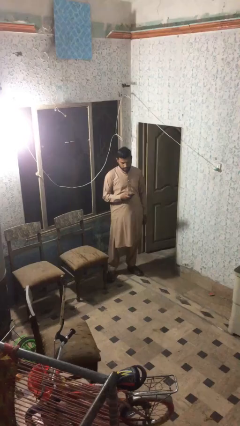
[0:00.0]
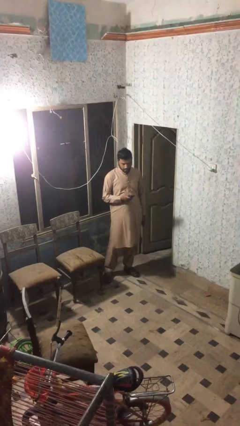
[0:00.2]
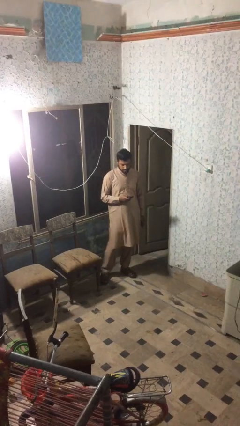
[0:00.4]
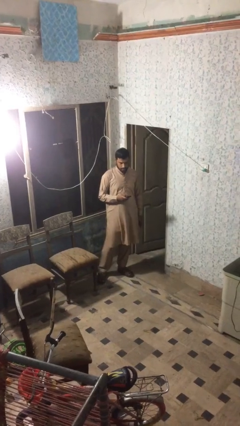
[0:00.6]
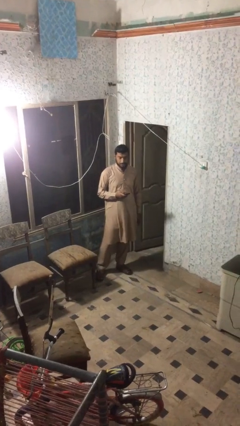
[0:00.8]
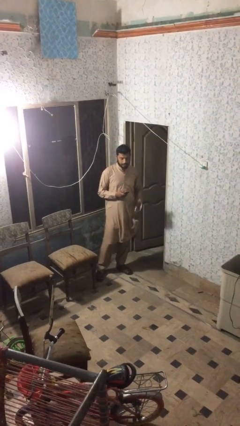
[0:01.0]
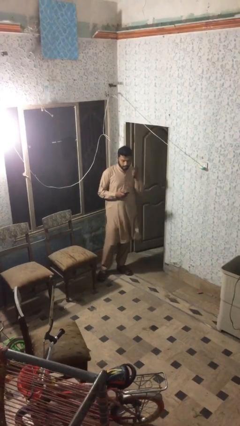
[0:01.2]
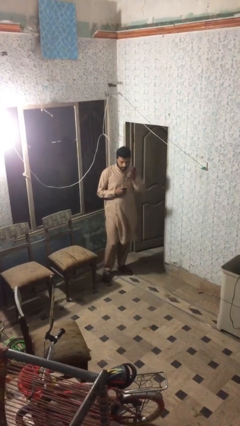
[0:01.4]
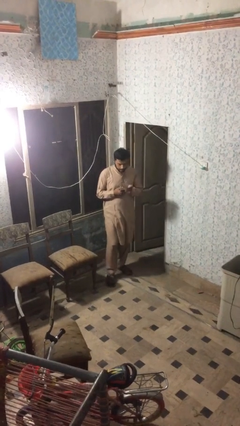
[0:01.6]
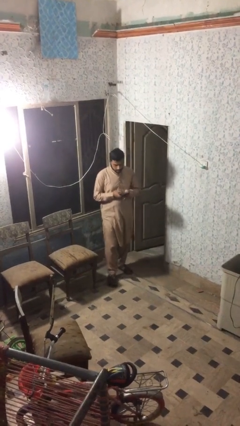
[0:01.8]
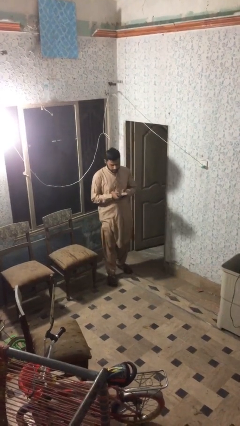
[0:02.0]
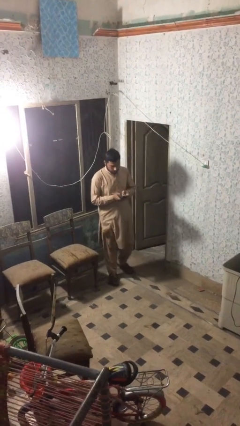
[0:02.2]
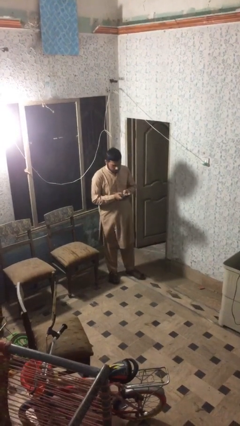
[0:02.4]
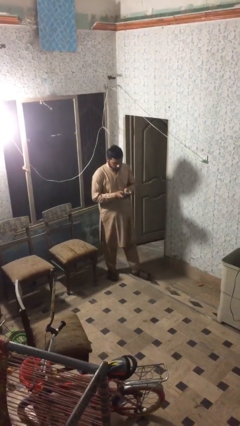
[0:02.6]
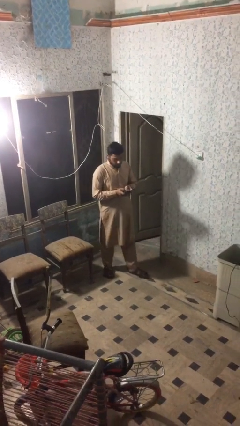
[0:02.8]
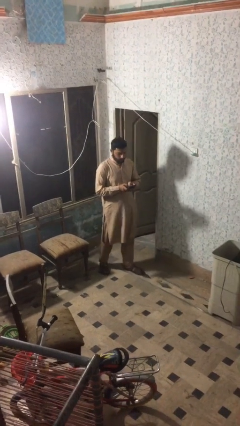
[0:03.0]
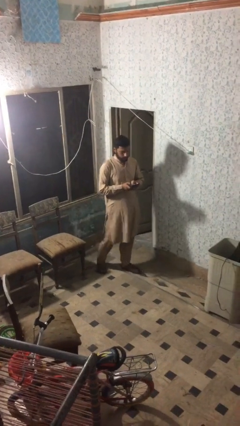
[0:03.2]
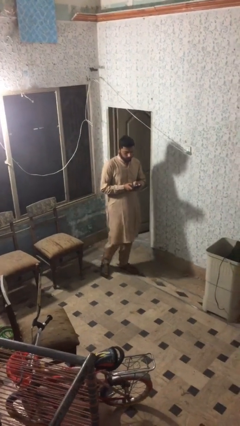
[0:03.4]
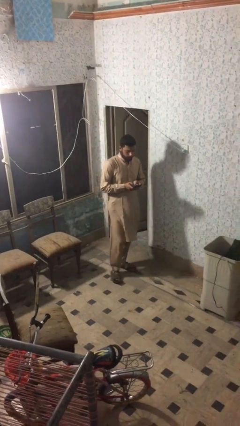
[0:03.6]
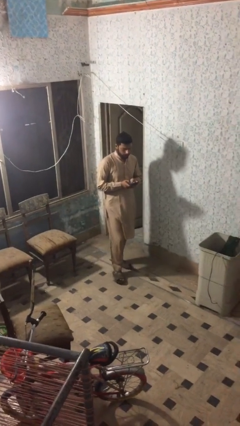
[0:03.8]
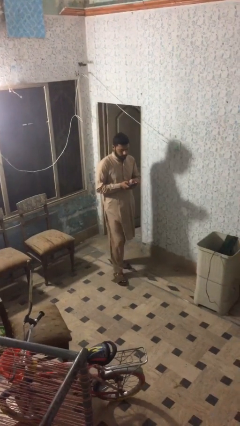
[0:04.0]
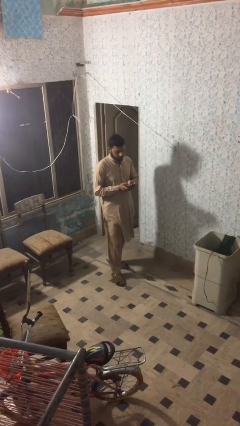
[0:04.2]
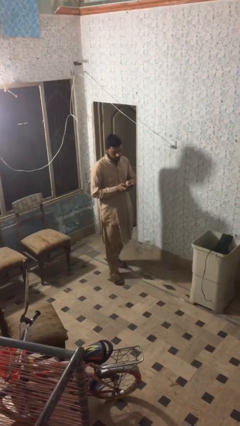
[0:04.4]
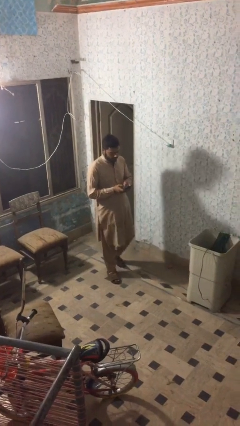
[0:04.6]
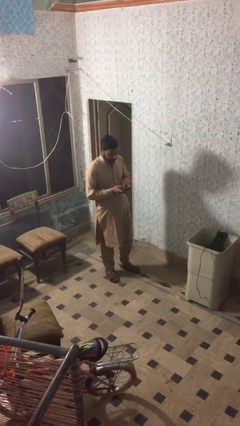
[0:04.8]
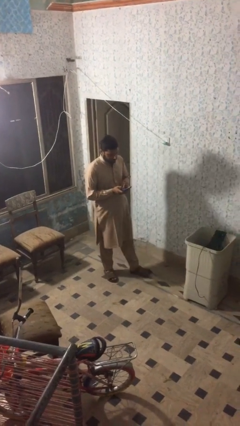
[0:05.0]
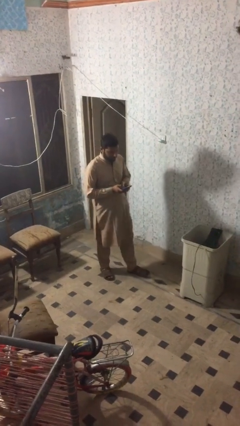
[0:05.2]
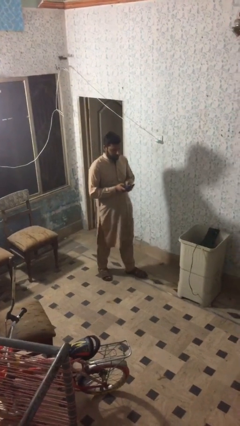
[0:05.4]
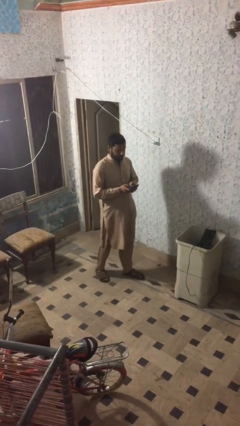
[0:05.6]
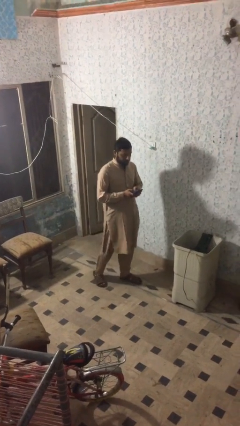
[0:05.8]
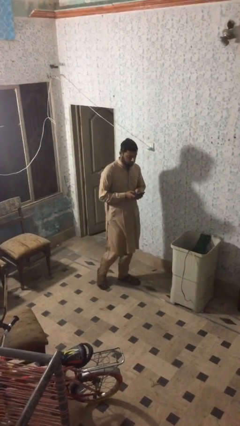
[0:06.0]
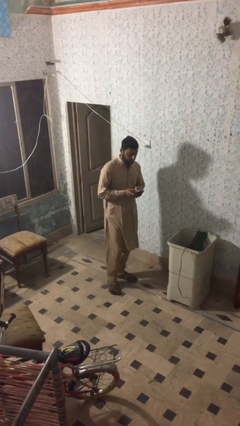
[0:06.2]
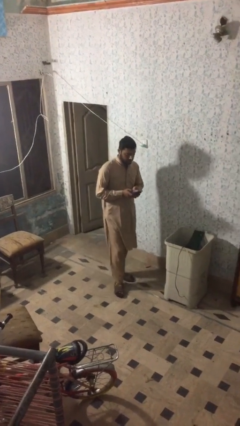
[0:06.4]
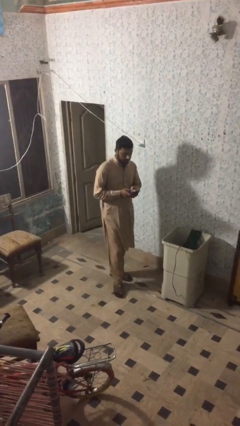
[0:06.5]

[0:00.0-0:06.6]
person texts on phone

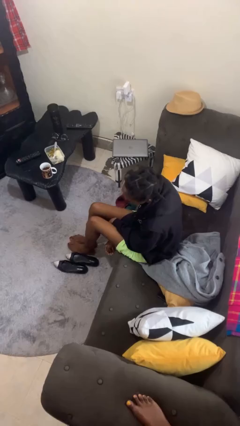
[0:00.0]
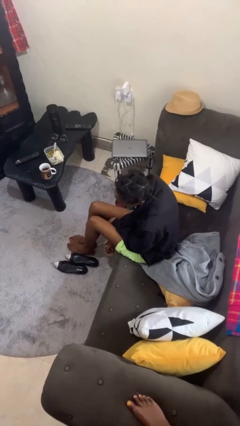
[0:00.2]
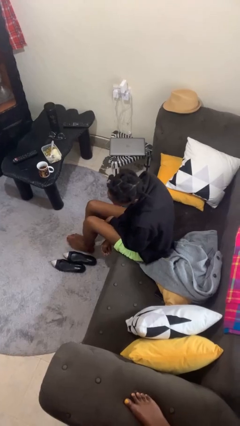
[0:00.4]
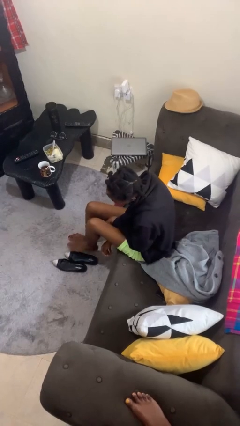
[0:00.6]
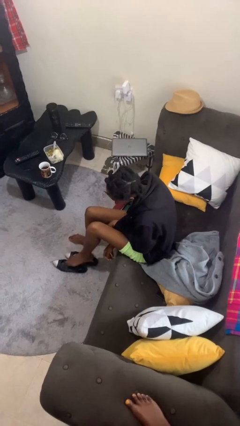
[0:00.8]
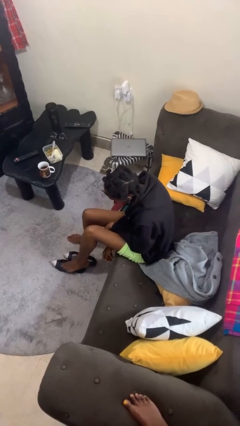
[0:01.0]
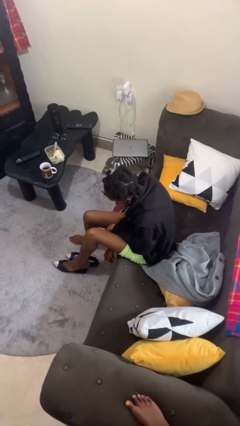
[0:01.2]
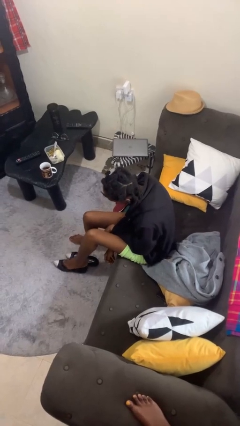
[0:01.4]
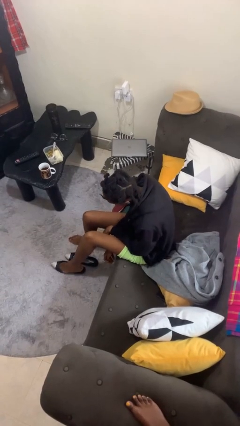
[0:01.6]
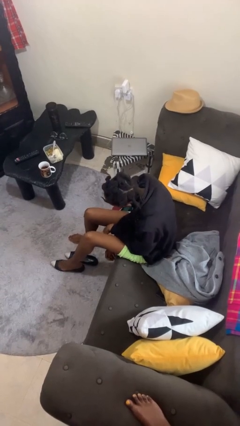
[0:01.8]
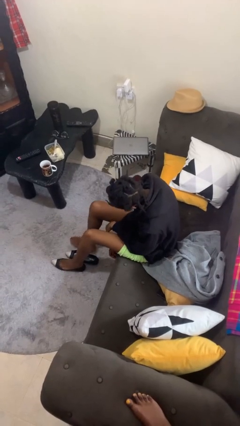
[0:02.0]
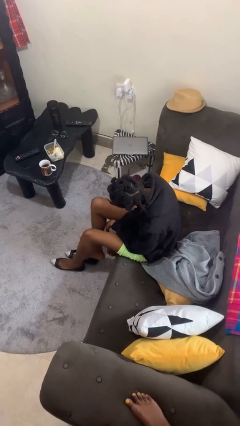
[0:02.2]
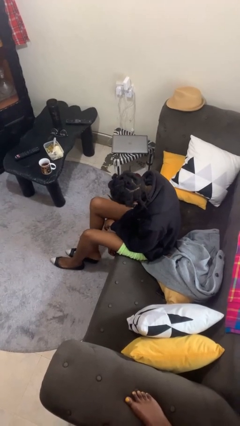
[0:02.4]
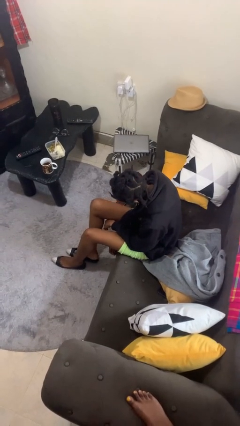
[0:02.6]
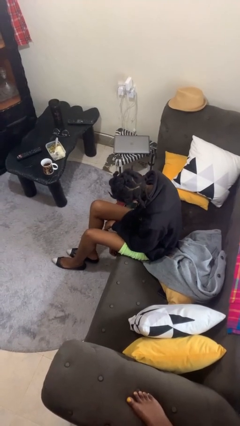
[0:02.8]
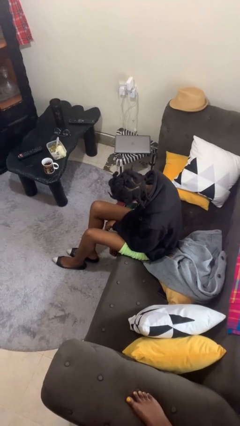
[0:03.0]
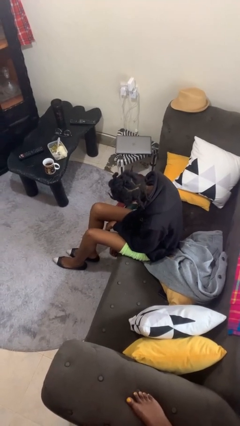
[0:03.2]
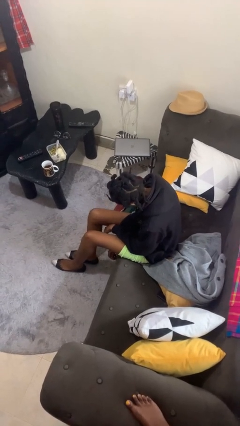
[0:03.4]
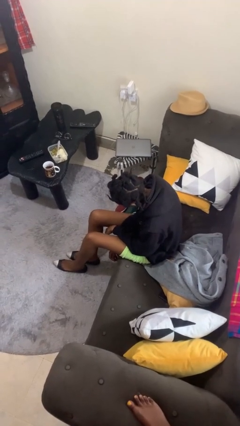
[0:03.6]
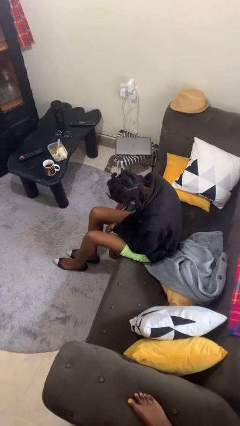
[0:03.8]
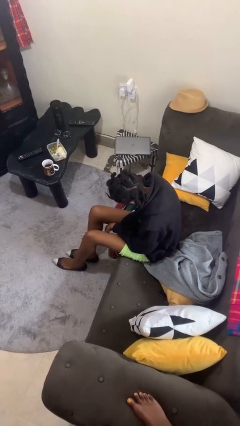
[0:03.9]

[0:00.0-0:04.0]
person puts on shoes

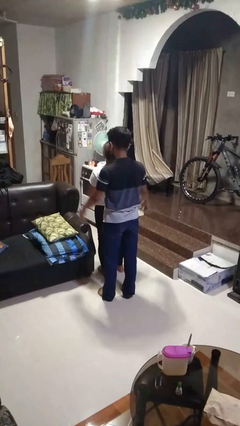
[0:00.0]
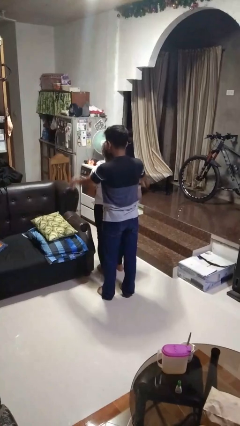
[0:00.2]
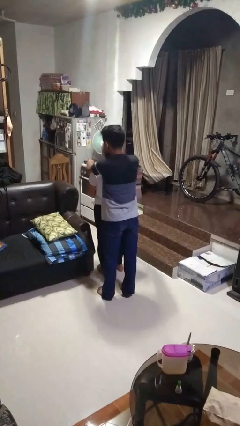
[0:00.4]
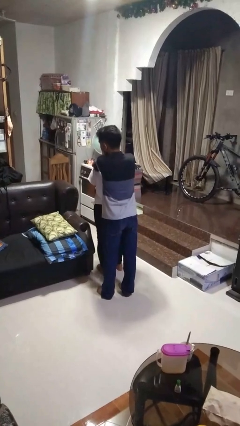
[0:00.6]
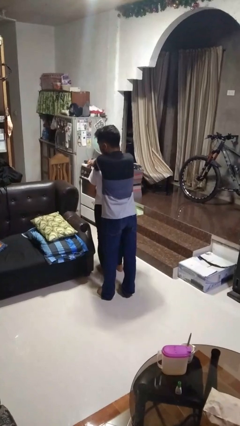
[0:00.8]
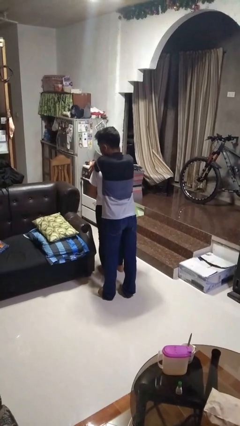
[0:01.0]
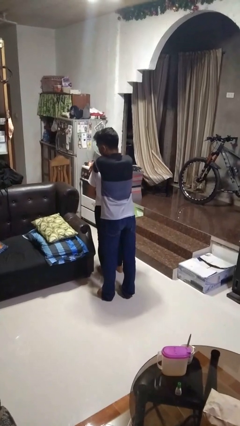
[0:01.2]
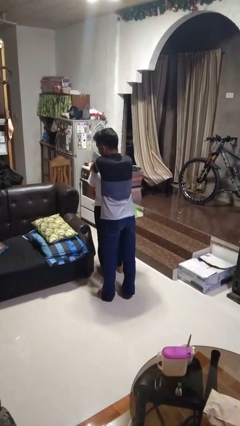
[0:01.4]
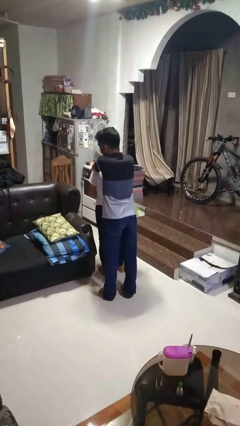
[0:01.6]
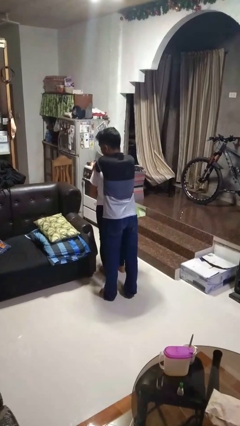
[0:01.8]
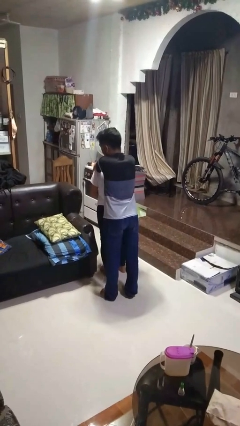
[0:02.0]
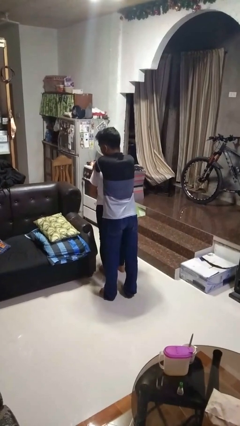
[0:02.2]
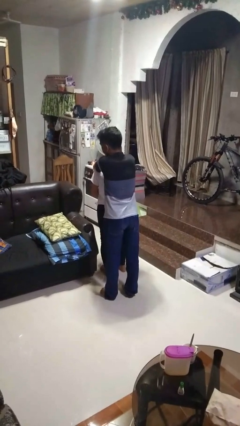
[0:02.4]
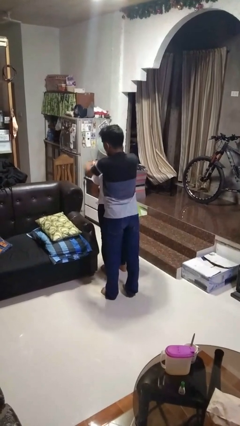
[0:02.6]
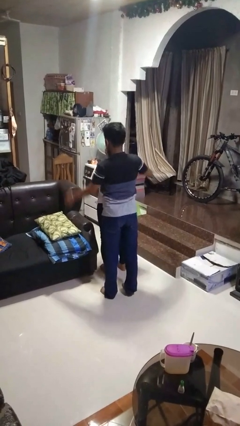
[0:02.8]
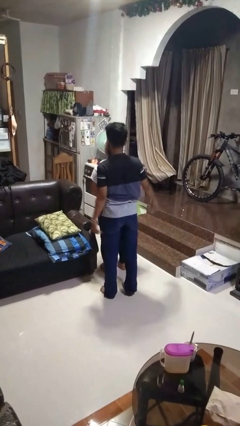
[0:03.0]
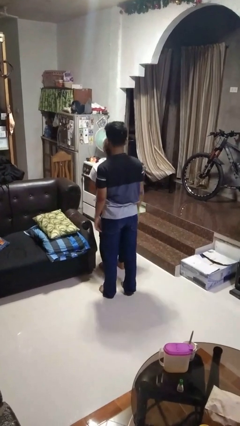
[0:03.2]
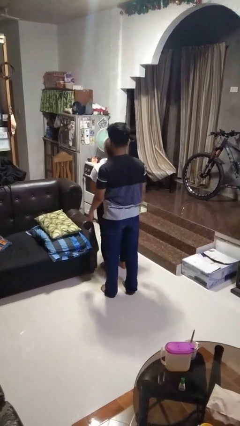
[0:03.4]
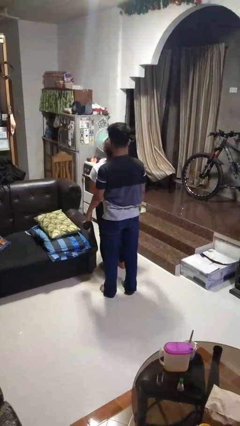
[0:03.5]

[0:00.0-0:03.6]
person hugs person from behind

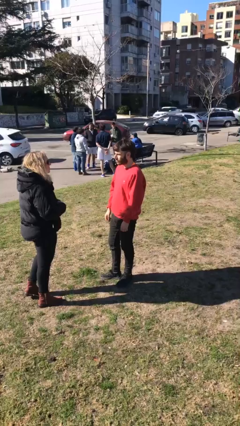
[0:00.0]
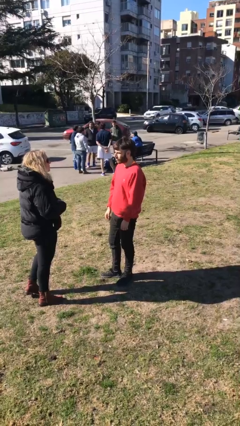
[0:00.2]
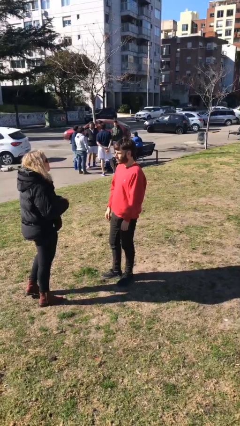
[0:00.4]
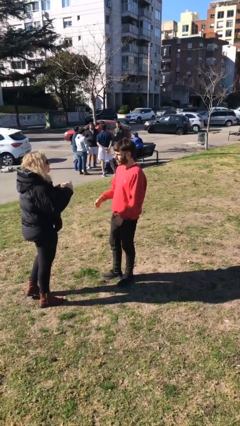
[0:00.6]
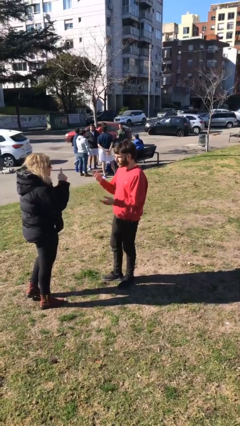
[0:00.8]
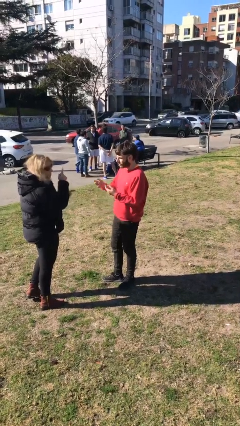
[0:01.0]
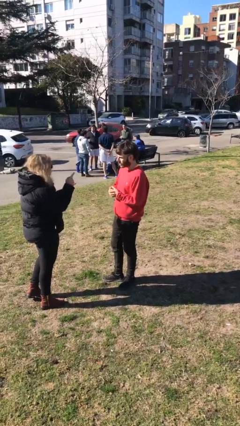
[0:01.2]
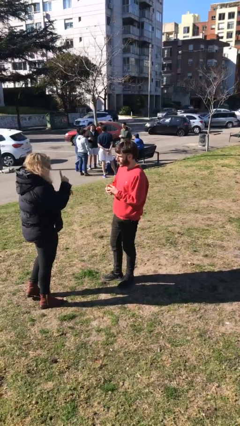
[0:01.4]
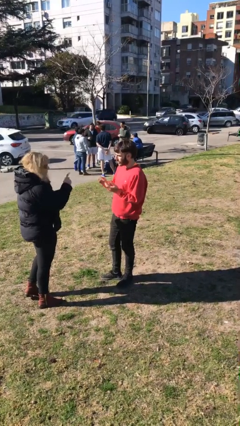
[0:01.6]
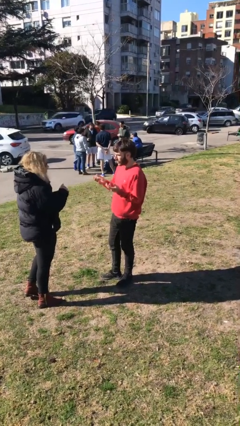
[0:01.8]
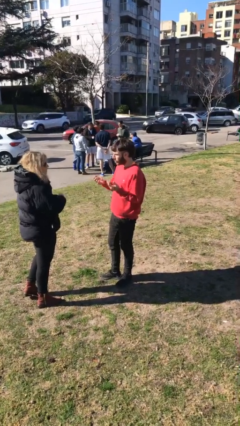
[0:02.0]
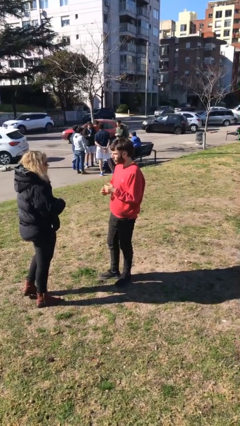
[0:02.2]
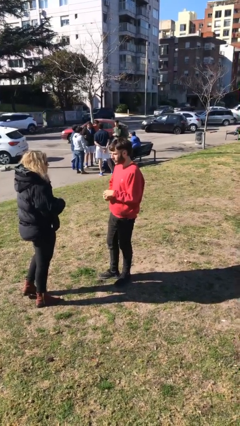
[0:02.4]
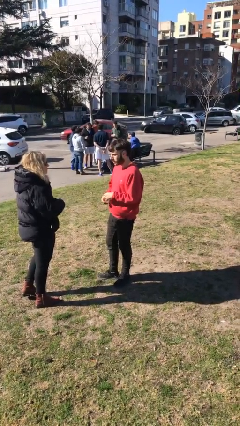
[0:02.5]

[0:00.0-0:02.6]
person talks to person

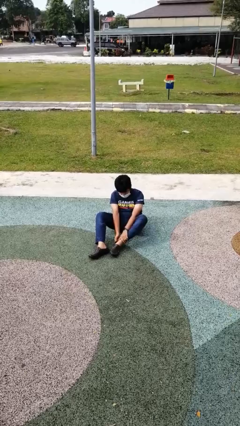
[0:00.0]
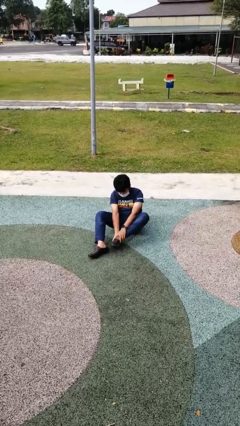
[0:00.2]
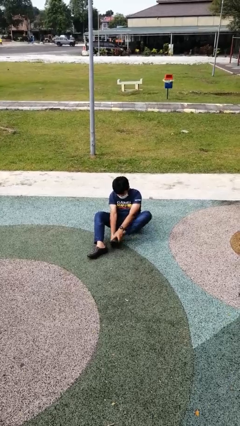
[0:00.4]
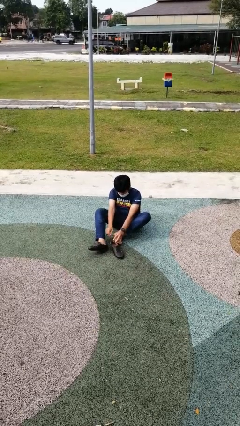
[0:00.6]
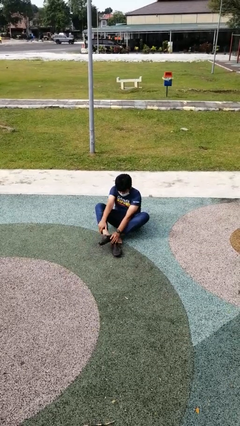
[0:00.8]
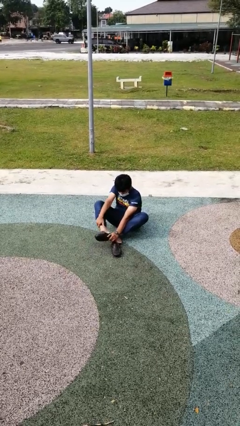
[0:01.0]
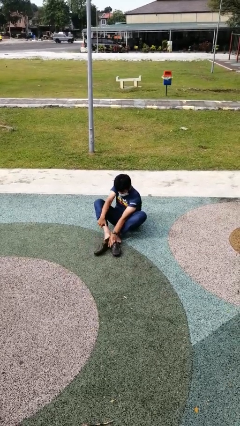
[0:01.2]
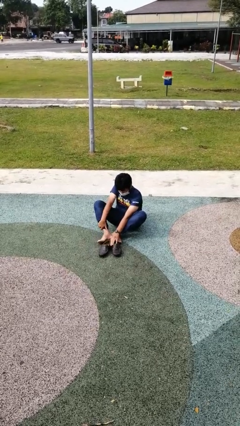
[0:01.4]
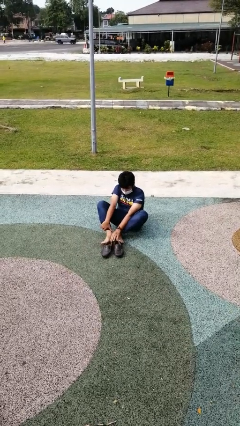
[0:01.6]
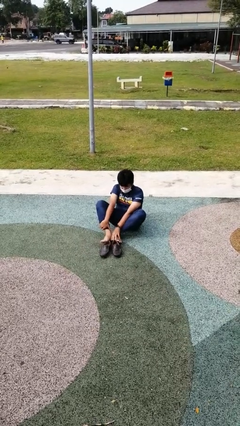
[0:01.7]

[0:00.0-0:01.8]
person takes off shoes
